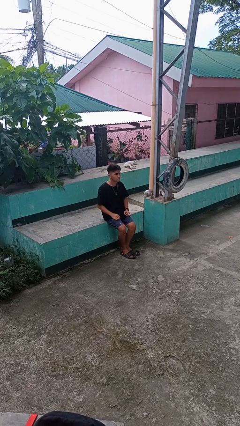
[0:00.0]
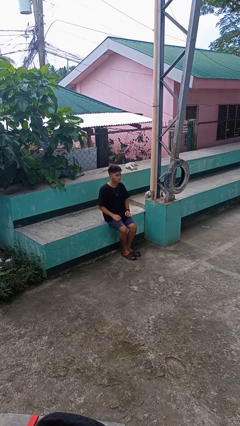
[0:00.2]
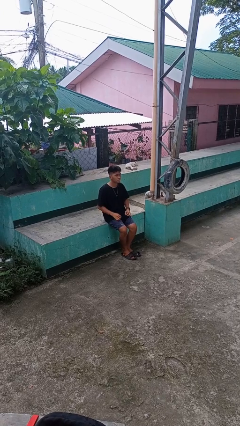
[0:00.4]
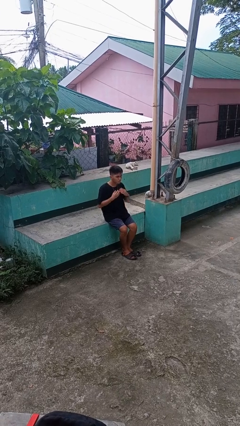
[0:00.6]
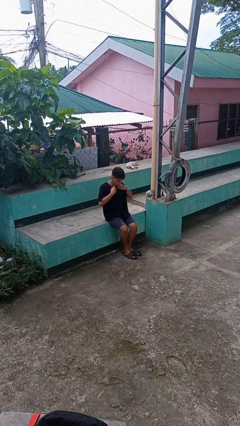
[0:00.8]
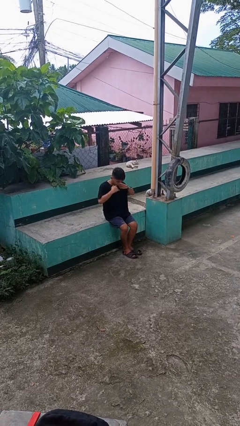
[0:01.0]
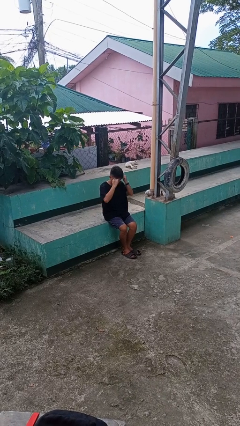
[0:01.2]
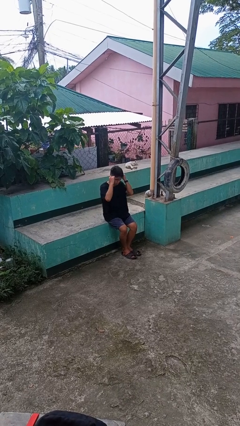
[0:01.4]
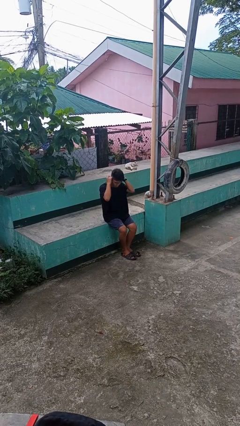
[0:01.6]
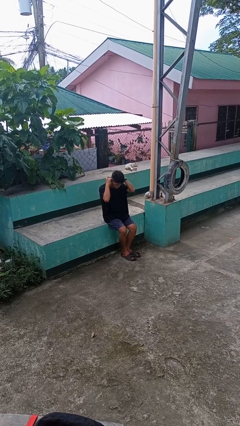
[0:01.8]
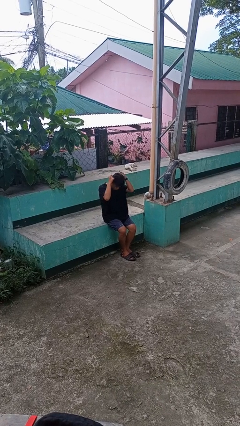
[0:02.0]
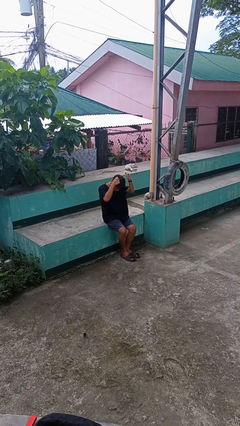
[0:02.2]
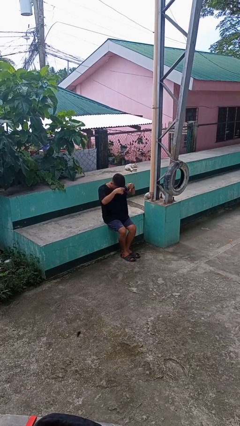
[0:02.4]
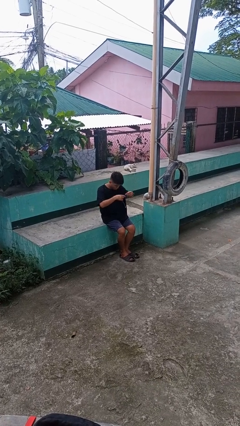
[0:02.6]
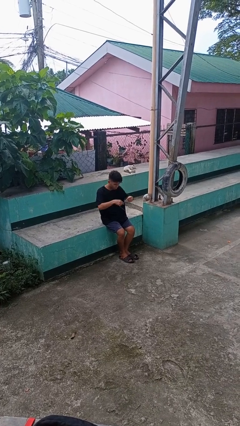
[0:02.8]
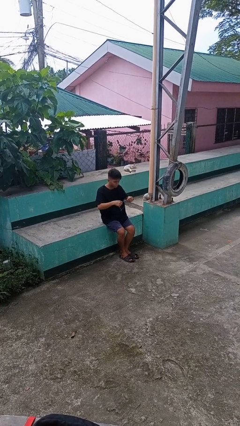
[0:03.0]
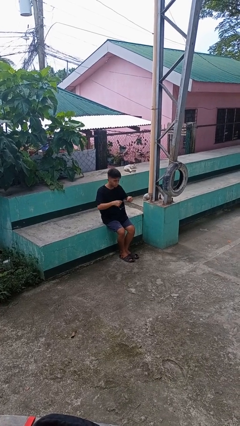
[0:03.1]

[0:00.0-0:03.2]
person takes off necklace

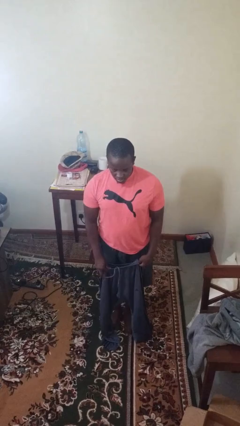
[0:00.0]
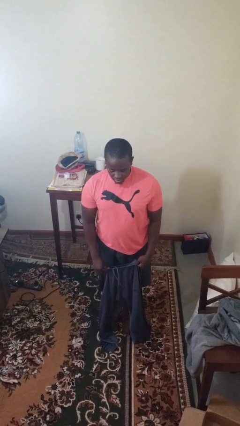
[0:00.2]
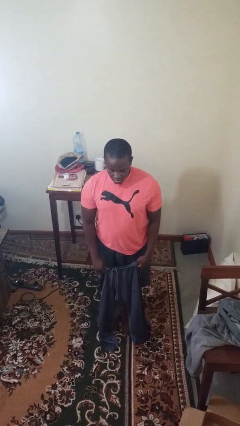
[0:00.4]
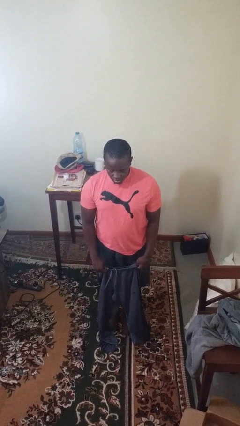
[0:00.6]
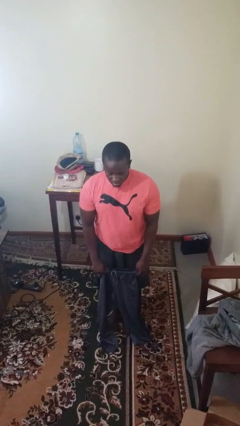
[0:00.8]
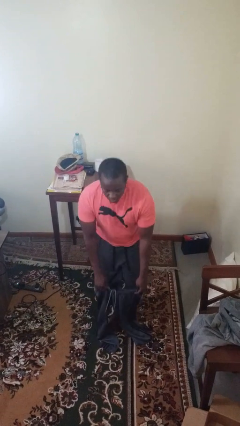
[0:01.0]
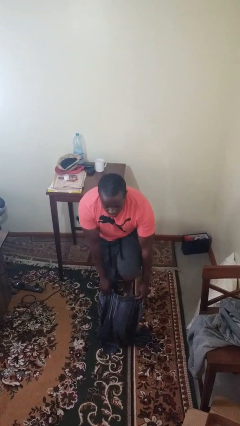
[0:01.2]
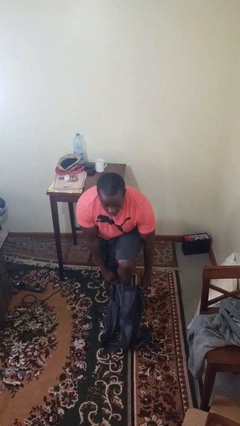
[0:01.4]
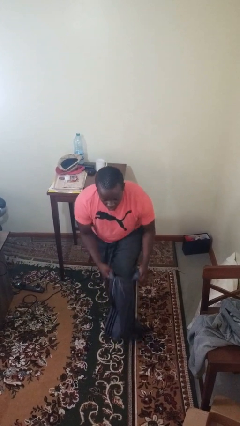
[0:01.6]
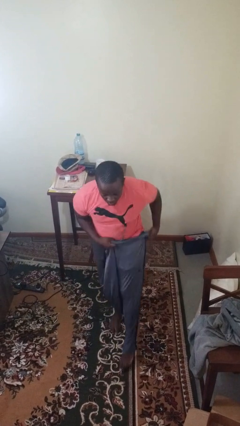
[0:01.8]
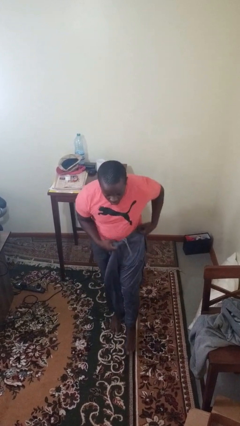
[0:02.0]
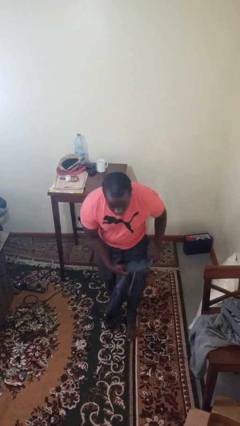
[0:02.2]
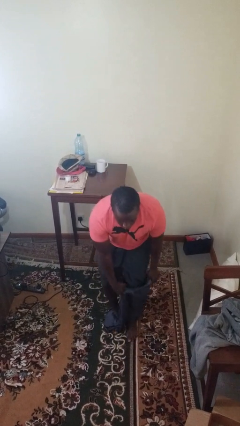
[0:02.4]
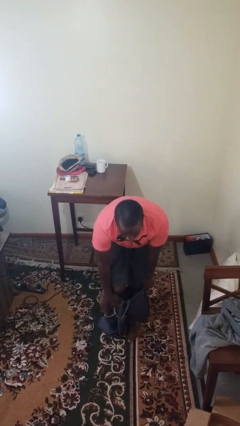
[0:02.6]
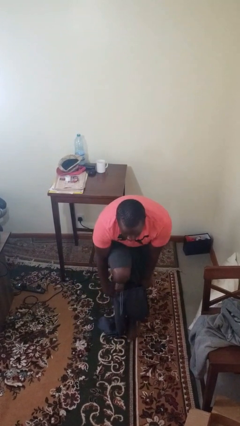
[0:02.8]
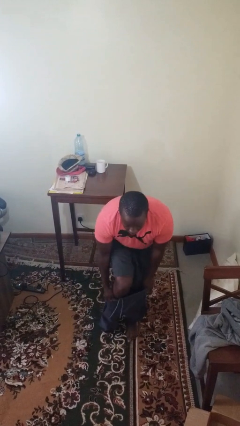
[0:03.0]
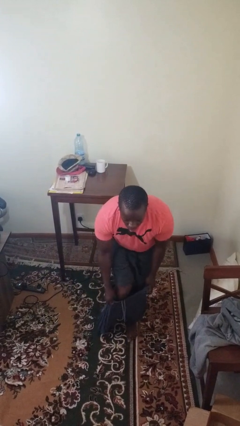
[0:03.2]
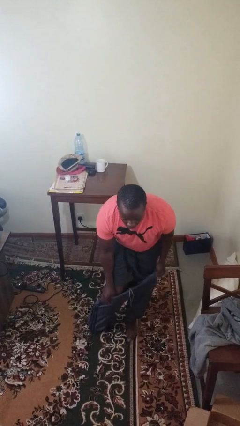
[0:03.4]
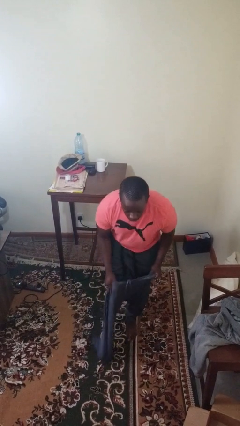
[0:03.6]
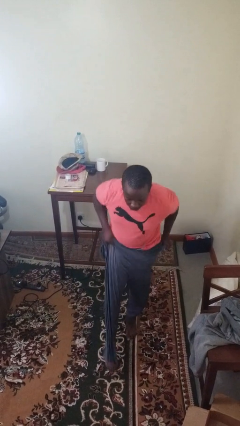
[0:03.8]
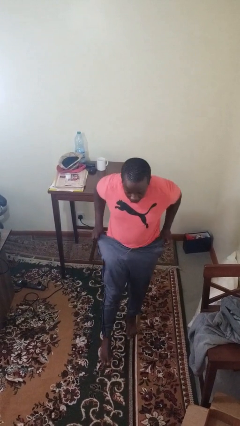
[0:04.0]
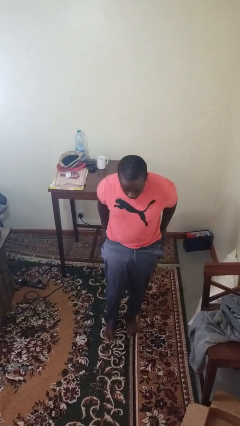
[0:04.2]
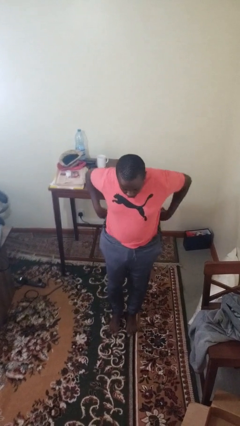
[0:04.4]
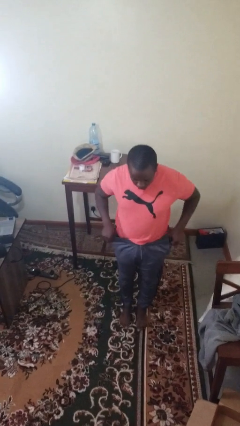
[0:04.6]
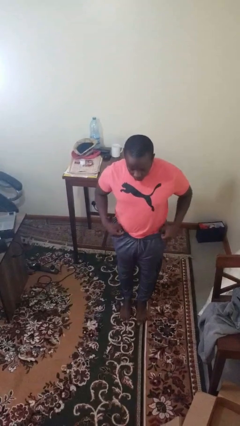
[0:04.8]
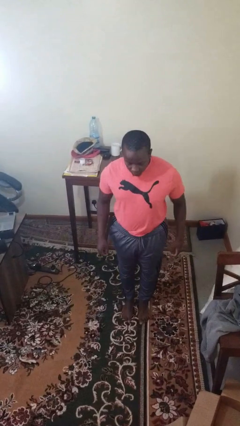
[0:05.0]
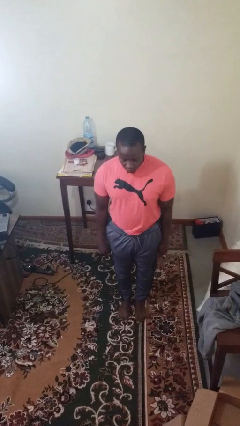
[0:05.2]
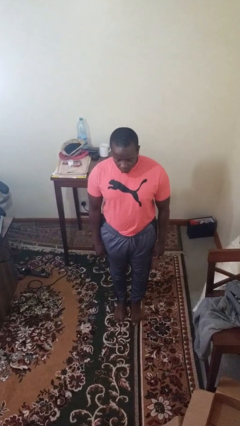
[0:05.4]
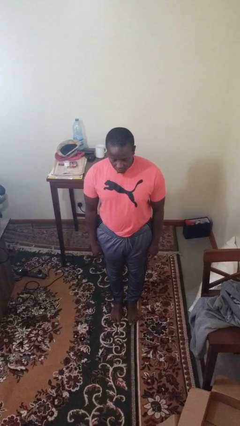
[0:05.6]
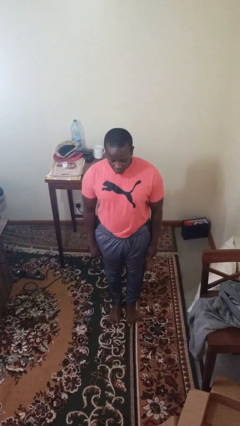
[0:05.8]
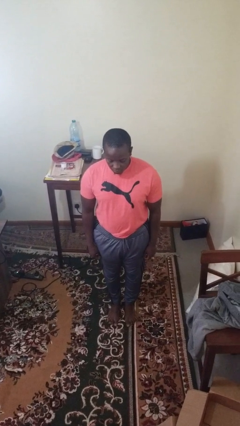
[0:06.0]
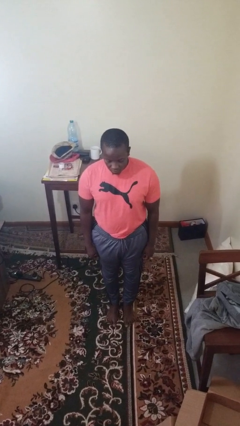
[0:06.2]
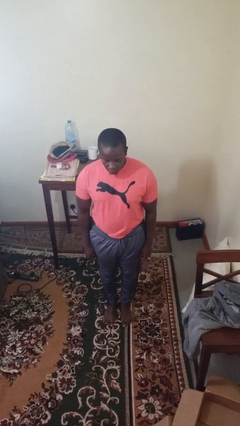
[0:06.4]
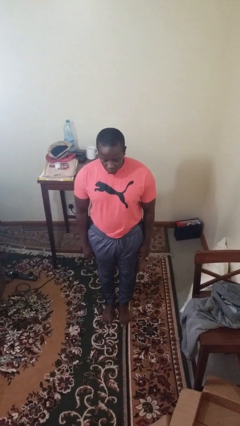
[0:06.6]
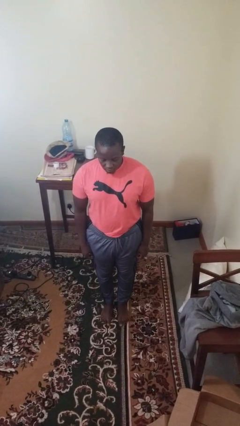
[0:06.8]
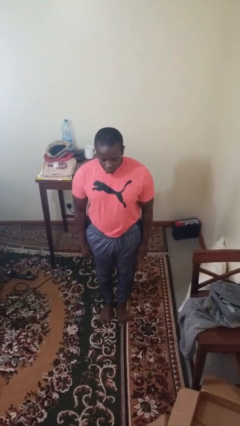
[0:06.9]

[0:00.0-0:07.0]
person puts on pants

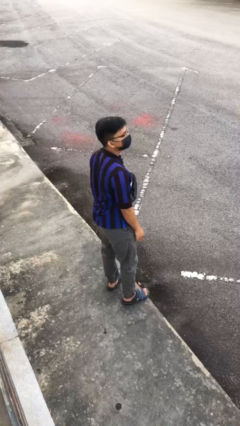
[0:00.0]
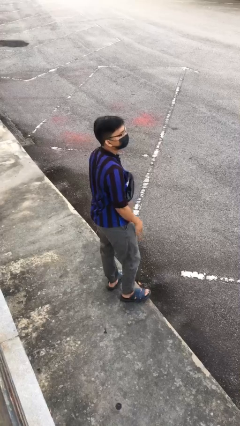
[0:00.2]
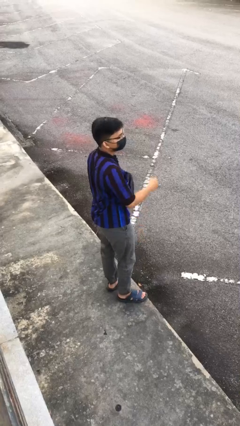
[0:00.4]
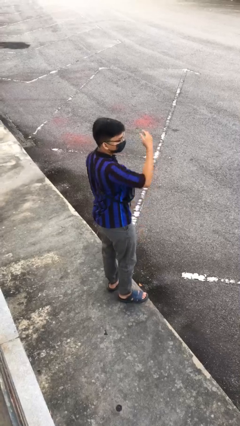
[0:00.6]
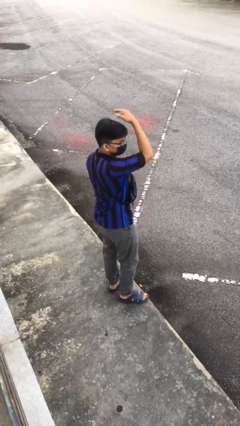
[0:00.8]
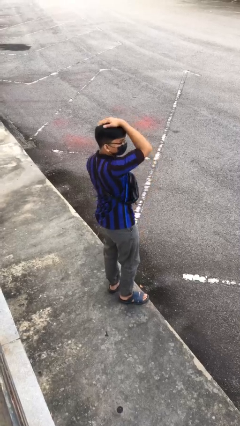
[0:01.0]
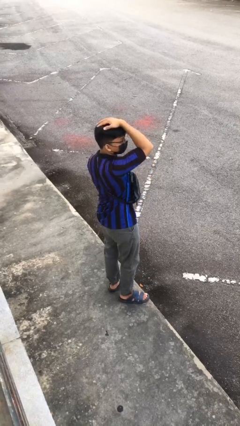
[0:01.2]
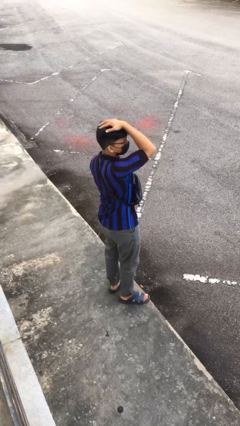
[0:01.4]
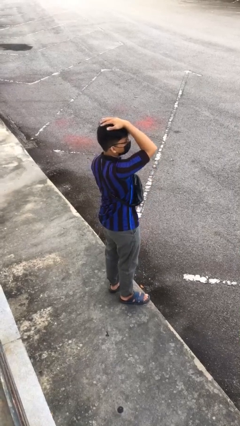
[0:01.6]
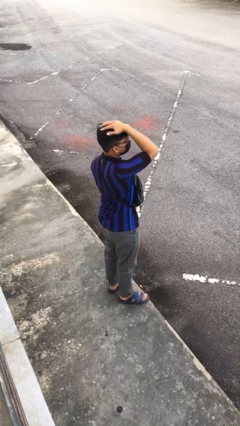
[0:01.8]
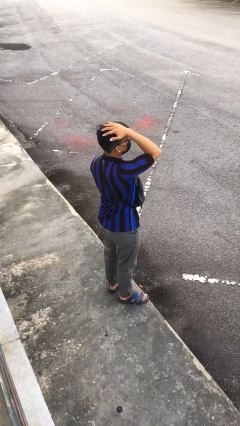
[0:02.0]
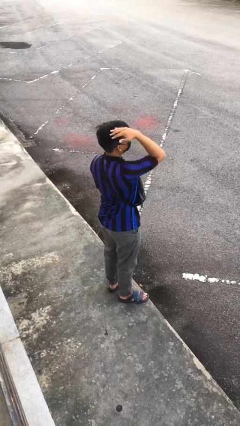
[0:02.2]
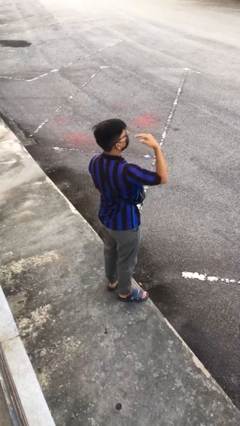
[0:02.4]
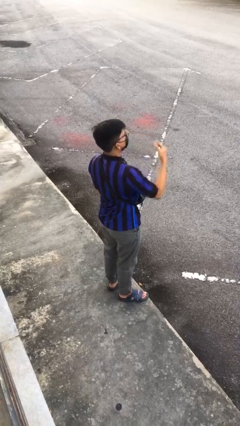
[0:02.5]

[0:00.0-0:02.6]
person pats head

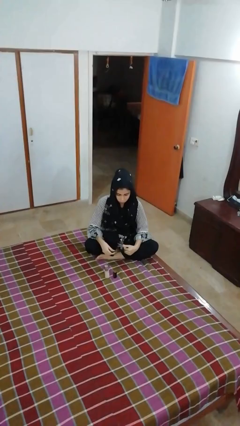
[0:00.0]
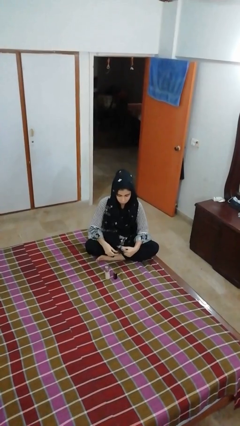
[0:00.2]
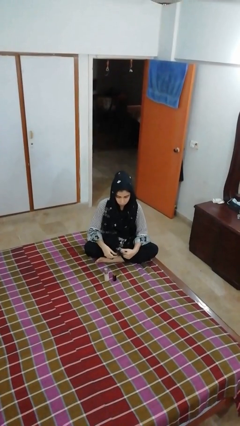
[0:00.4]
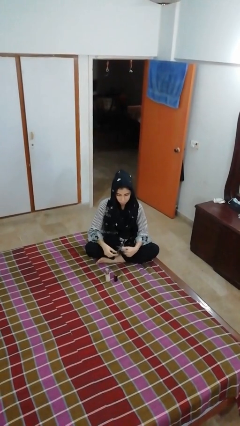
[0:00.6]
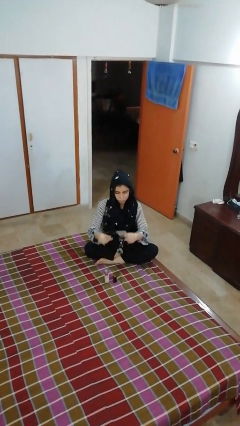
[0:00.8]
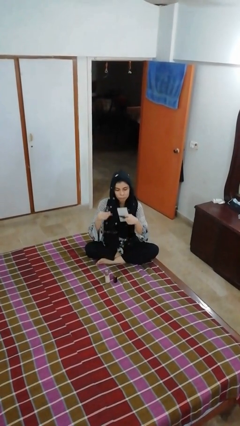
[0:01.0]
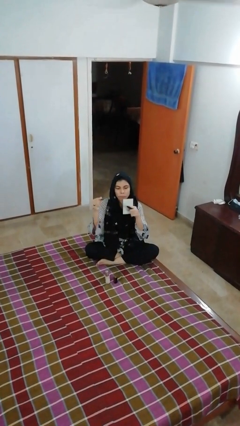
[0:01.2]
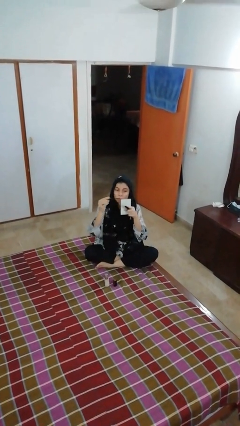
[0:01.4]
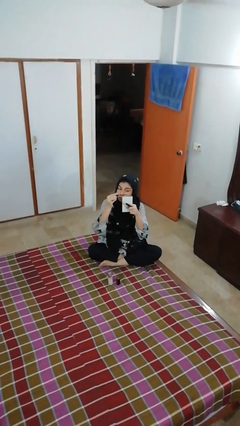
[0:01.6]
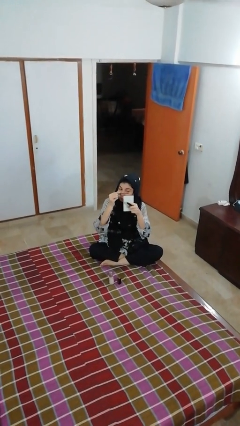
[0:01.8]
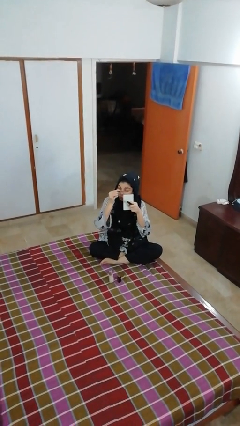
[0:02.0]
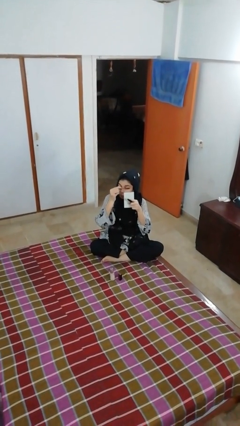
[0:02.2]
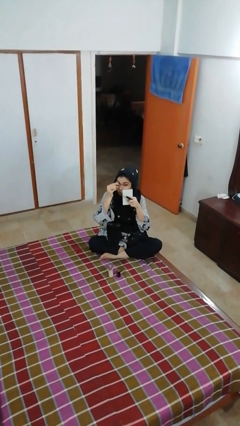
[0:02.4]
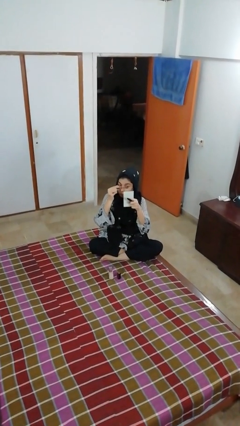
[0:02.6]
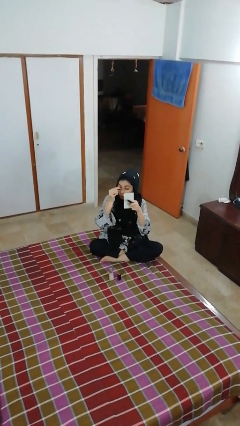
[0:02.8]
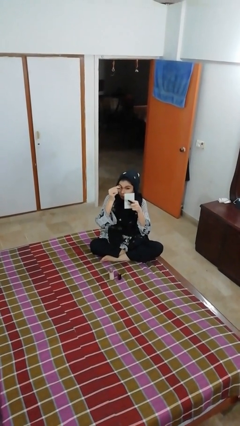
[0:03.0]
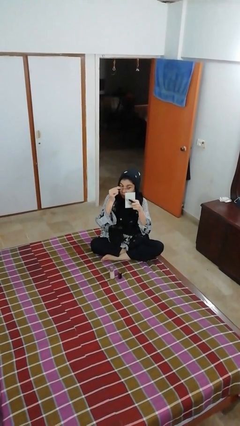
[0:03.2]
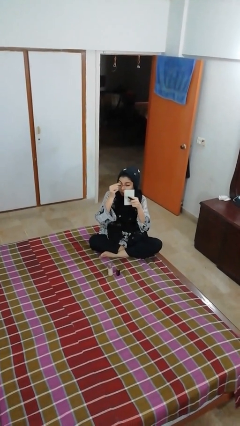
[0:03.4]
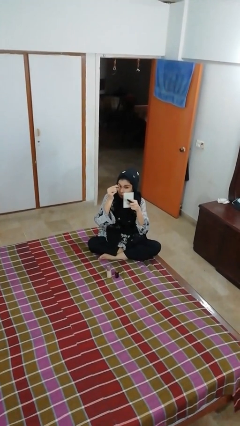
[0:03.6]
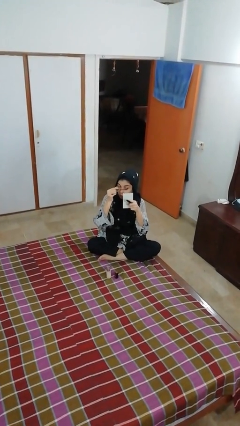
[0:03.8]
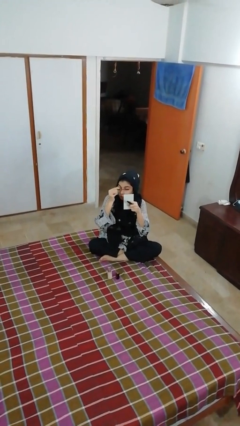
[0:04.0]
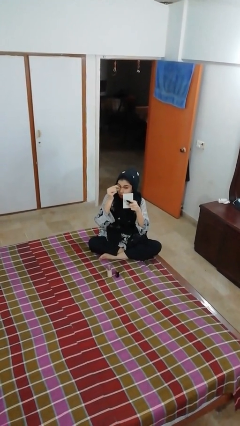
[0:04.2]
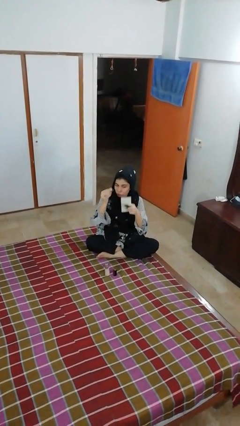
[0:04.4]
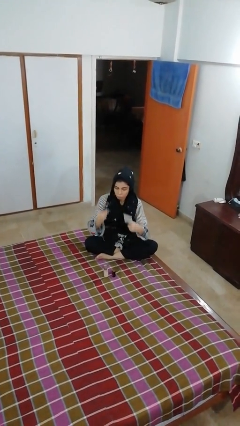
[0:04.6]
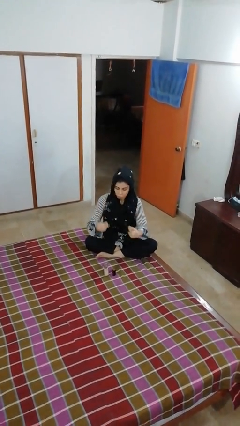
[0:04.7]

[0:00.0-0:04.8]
person applies eye makeup
